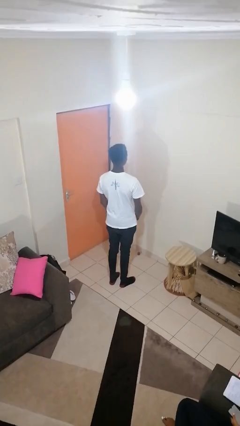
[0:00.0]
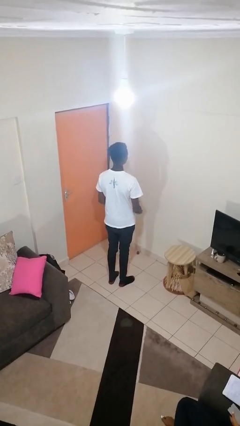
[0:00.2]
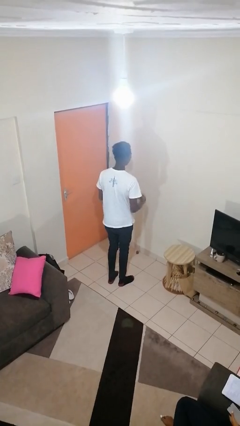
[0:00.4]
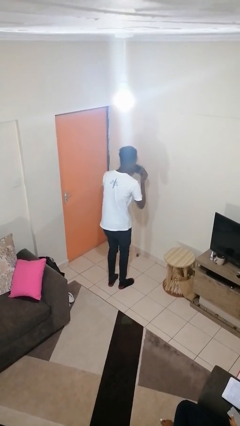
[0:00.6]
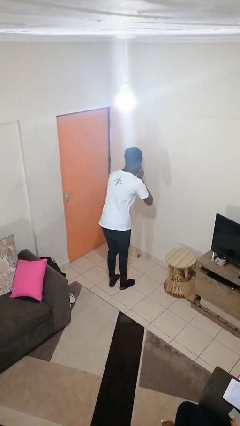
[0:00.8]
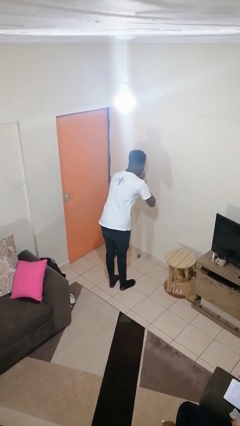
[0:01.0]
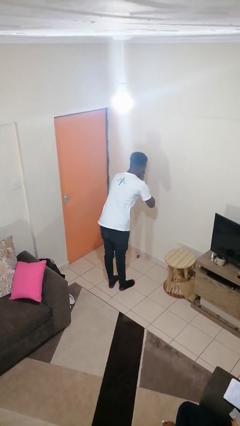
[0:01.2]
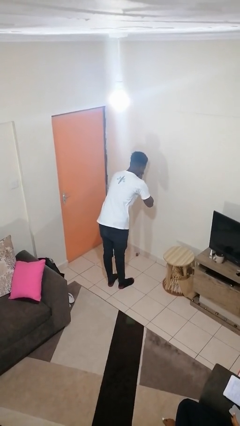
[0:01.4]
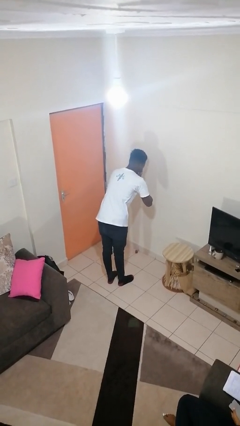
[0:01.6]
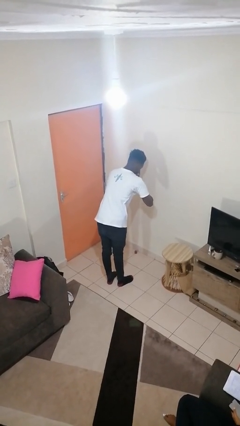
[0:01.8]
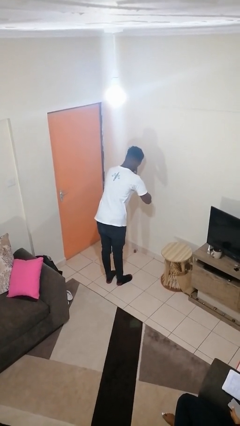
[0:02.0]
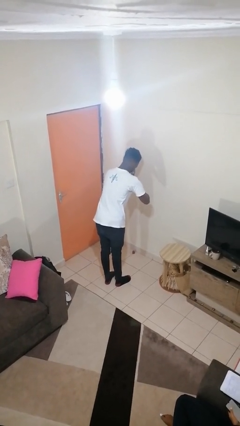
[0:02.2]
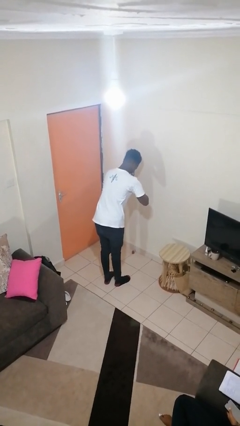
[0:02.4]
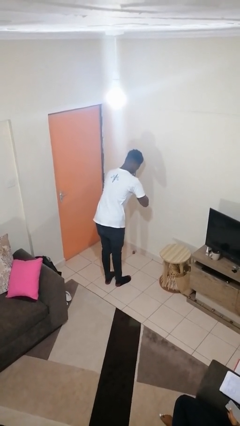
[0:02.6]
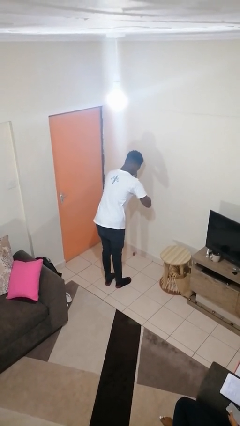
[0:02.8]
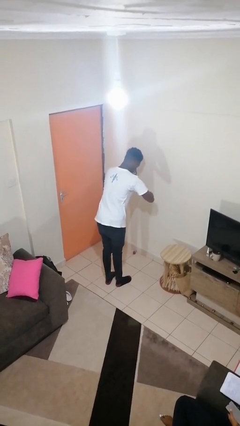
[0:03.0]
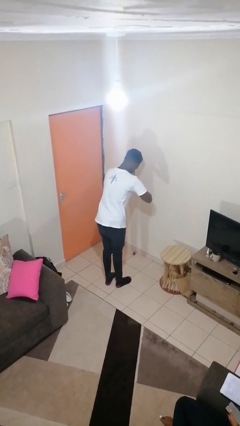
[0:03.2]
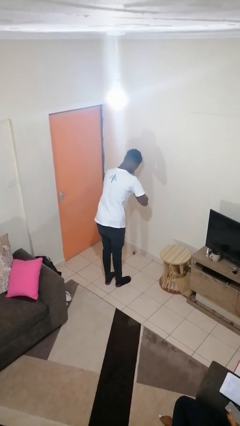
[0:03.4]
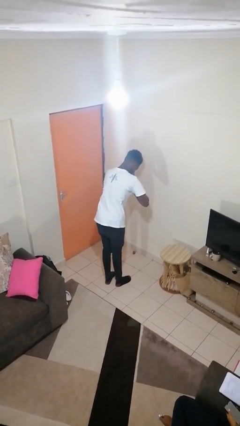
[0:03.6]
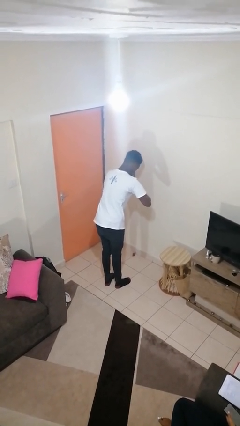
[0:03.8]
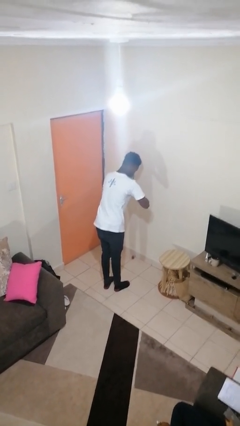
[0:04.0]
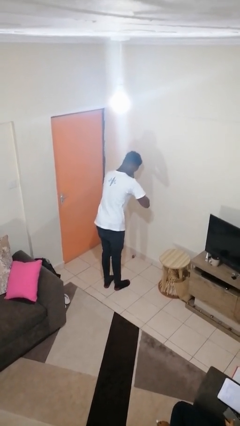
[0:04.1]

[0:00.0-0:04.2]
person blows nose

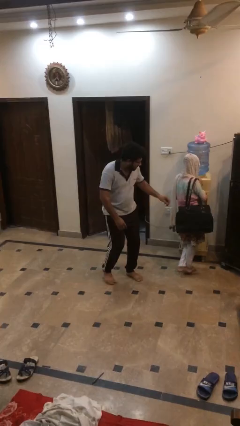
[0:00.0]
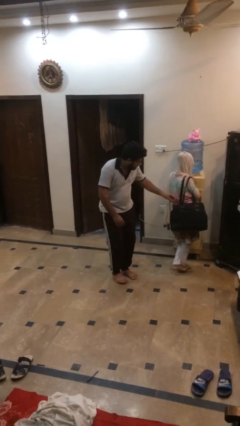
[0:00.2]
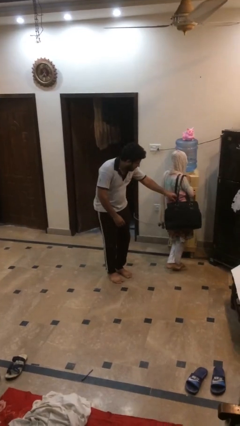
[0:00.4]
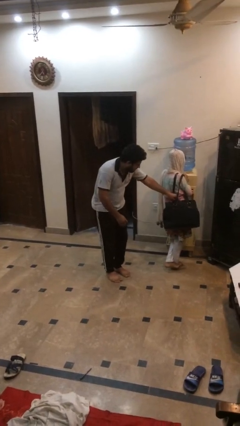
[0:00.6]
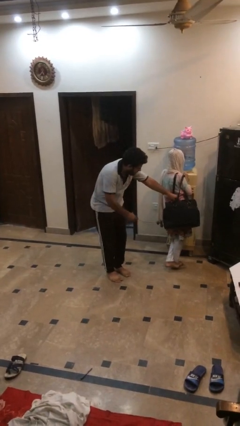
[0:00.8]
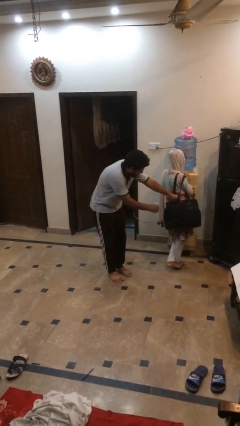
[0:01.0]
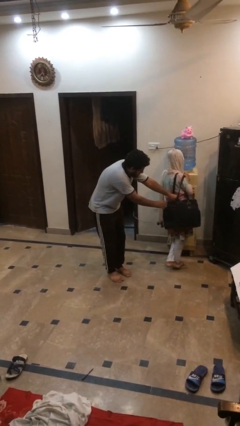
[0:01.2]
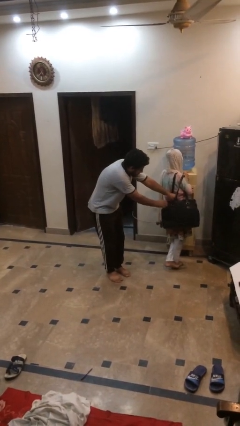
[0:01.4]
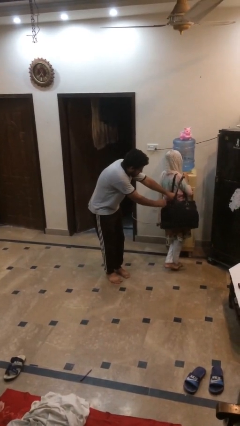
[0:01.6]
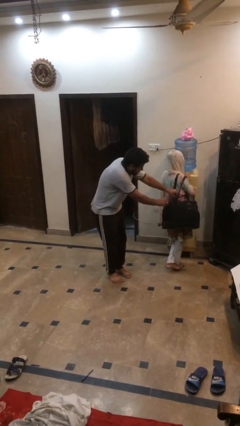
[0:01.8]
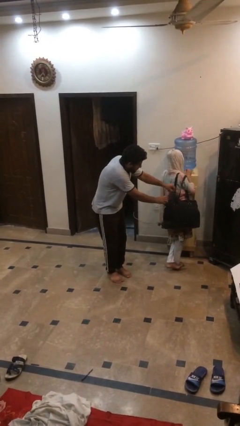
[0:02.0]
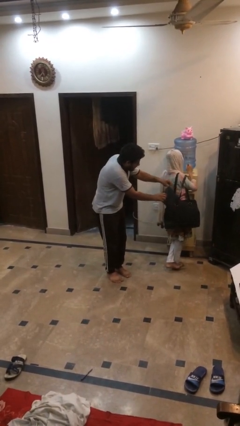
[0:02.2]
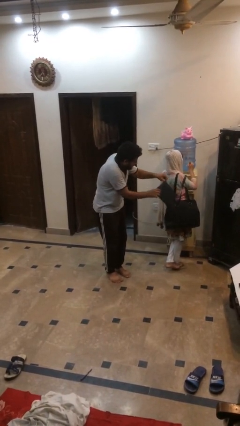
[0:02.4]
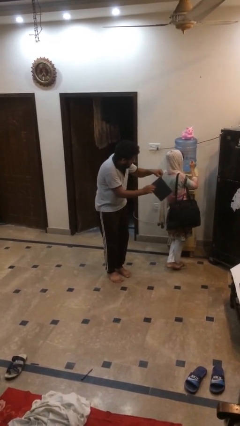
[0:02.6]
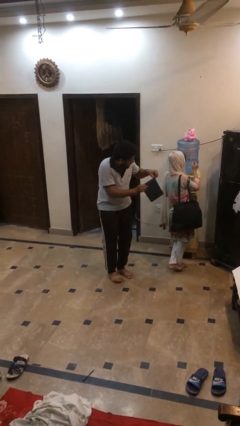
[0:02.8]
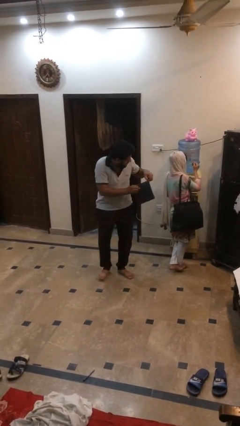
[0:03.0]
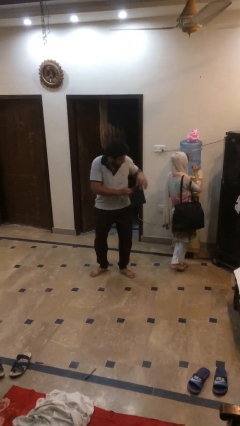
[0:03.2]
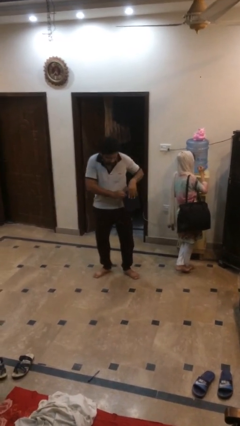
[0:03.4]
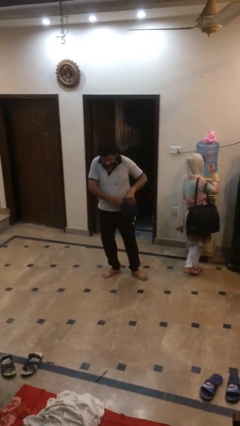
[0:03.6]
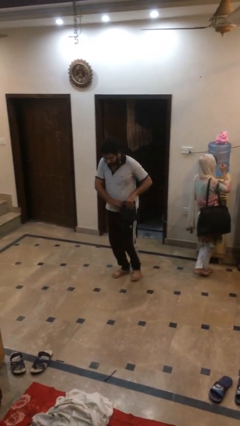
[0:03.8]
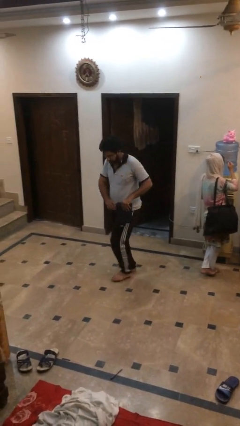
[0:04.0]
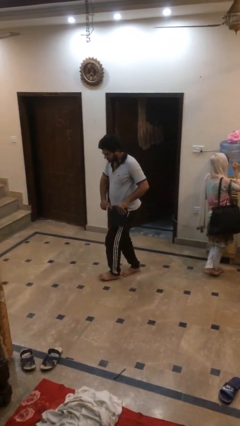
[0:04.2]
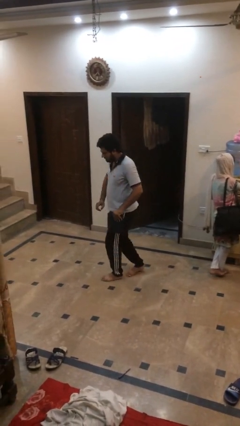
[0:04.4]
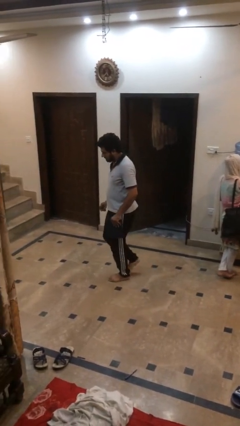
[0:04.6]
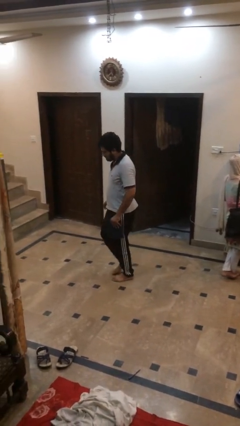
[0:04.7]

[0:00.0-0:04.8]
person steals object from person

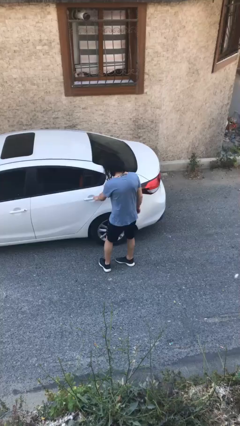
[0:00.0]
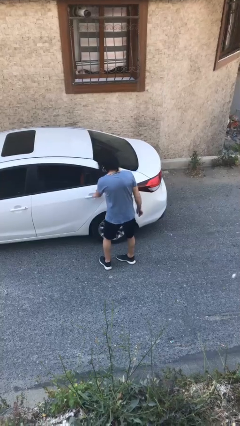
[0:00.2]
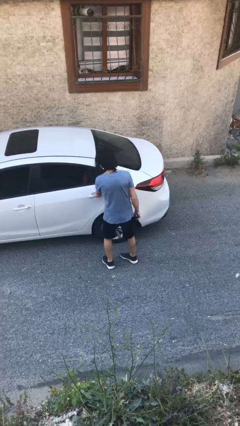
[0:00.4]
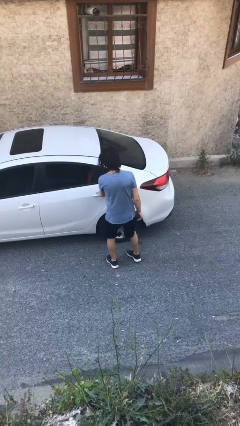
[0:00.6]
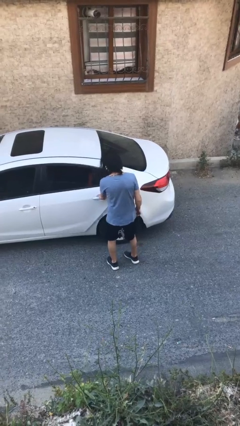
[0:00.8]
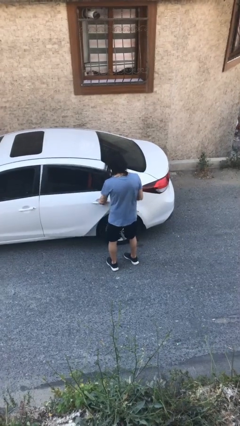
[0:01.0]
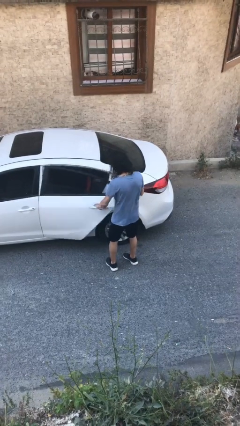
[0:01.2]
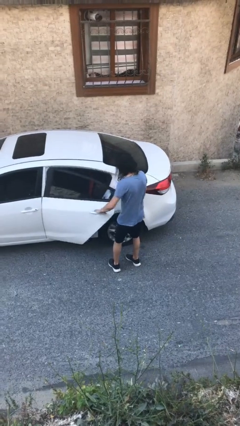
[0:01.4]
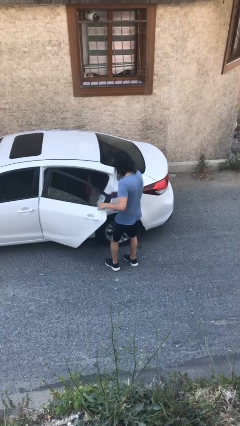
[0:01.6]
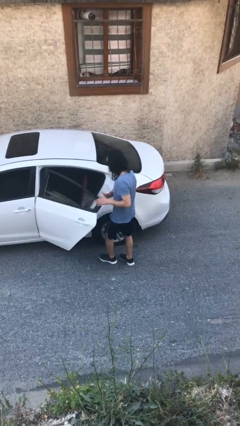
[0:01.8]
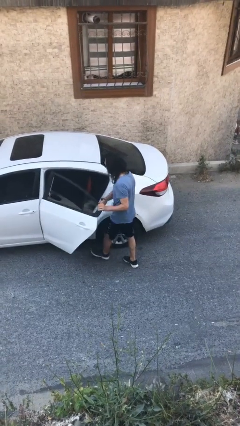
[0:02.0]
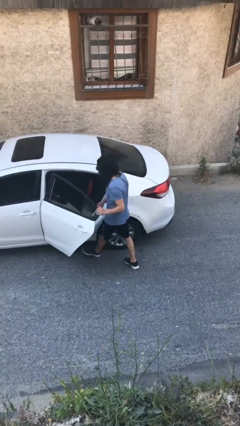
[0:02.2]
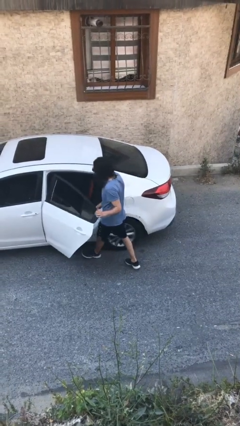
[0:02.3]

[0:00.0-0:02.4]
person opens car door

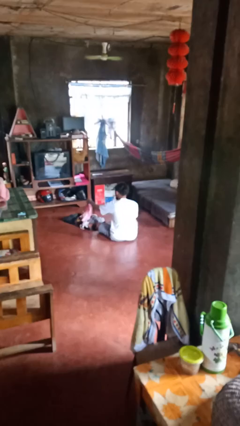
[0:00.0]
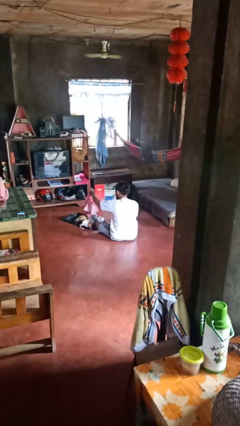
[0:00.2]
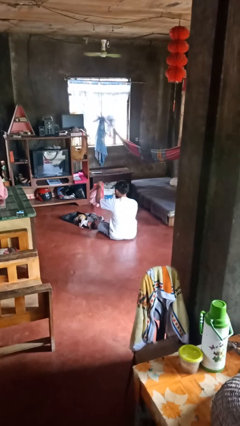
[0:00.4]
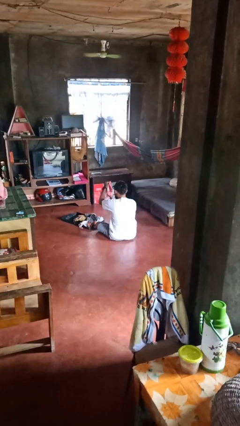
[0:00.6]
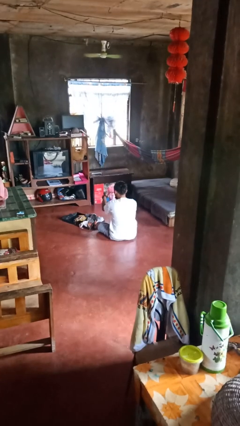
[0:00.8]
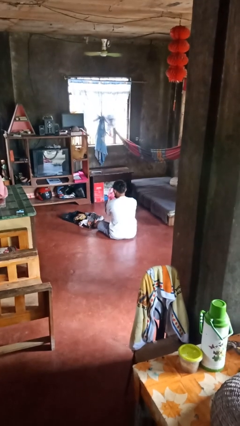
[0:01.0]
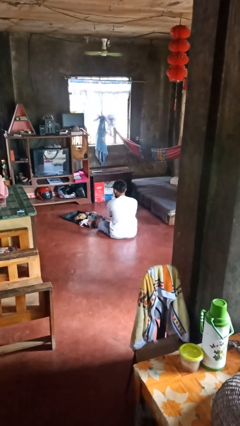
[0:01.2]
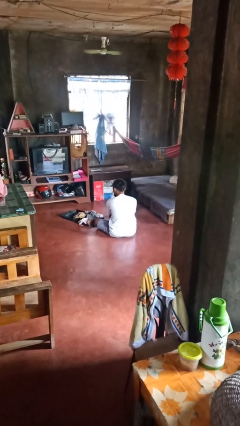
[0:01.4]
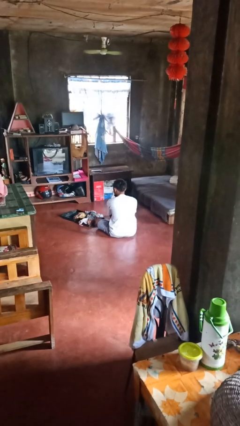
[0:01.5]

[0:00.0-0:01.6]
person unloads clothes from suitcase

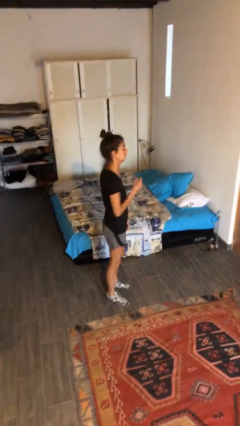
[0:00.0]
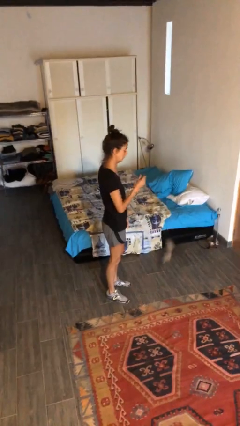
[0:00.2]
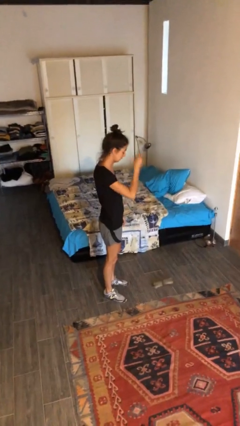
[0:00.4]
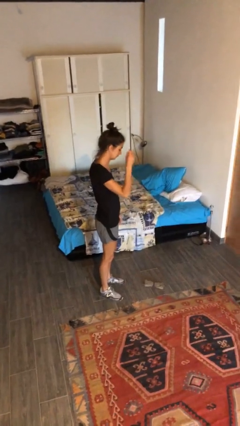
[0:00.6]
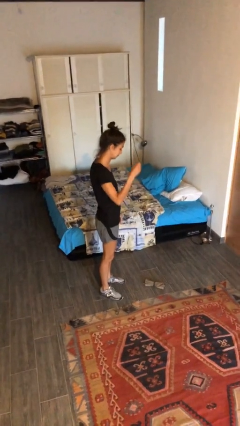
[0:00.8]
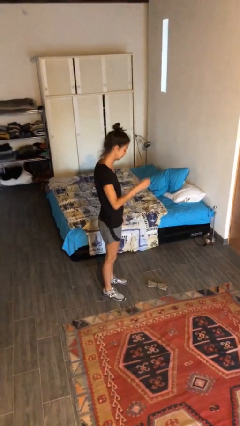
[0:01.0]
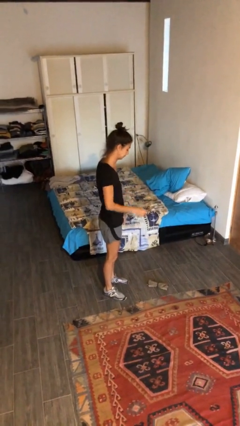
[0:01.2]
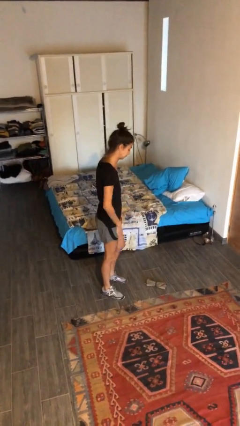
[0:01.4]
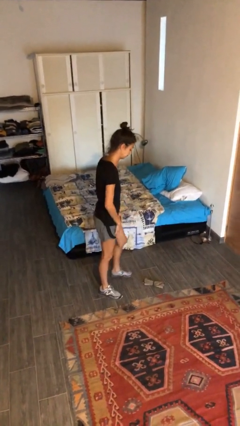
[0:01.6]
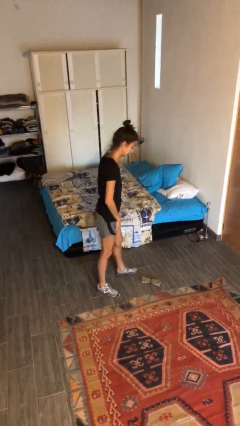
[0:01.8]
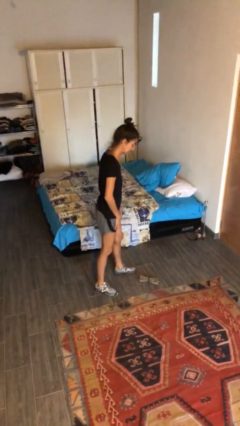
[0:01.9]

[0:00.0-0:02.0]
person drops object

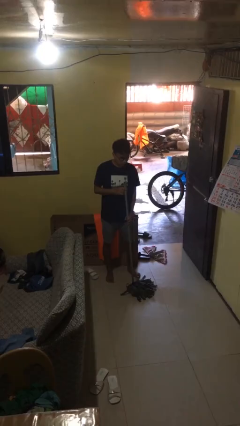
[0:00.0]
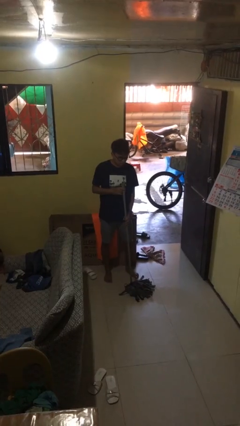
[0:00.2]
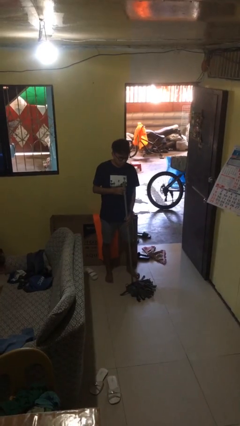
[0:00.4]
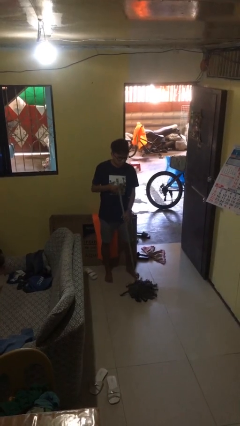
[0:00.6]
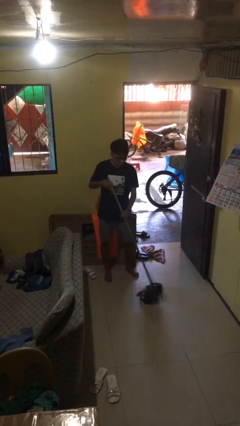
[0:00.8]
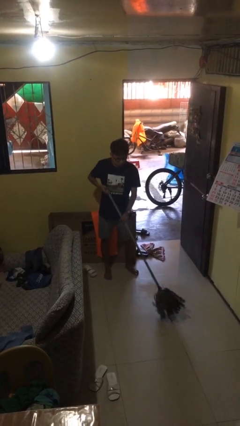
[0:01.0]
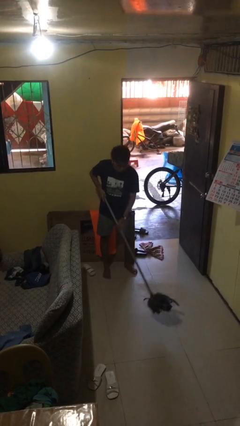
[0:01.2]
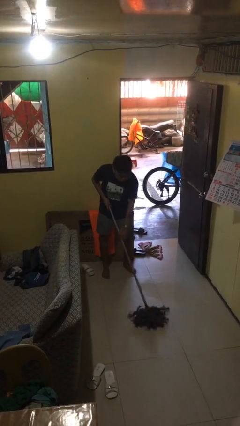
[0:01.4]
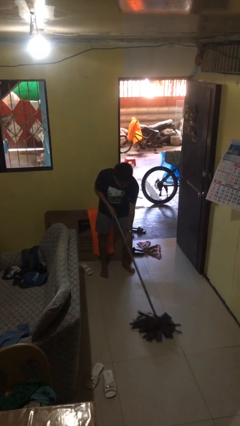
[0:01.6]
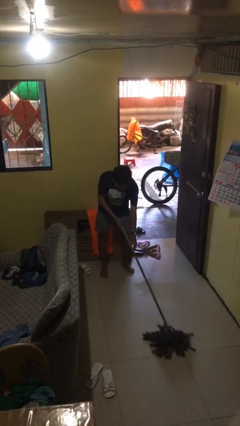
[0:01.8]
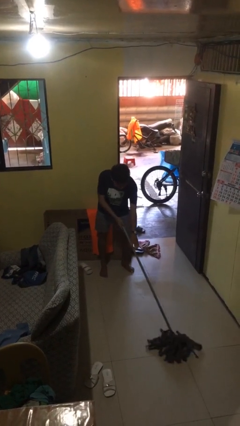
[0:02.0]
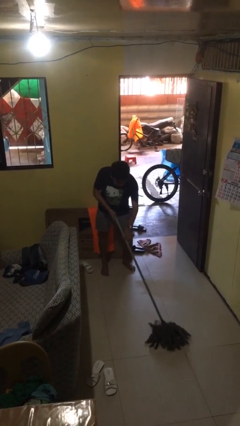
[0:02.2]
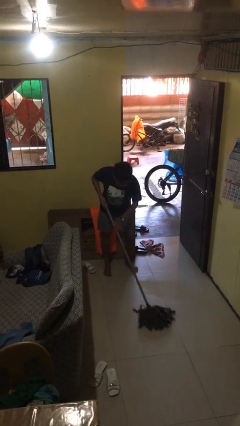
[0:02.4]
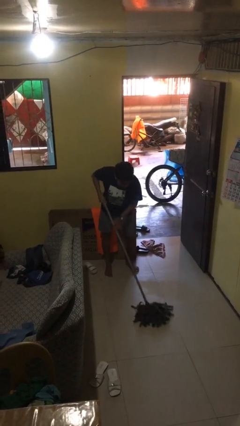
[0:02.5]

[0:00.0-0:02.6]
person mops
